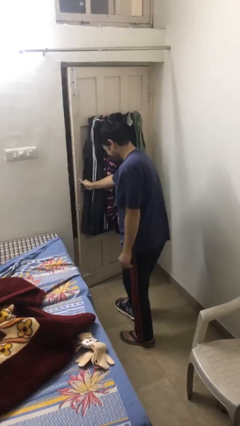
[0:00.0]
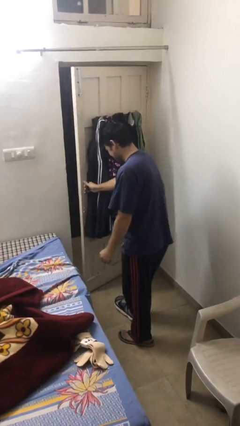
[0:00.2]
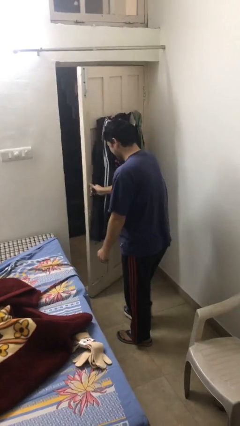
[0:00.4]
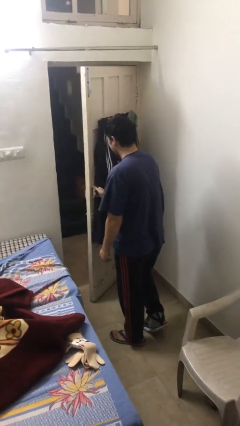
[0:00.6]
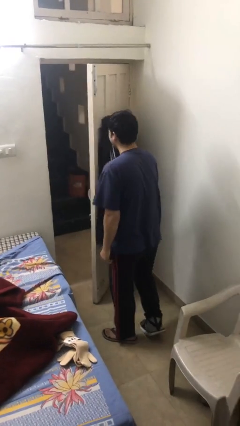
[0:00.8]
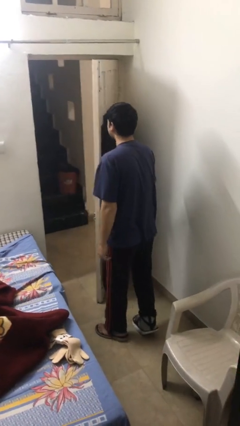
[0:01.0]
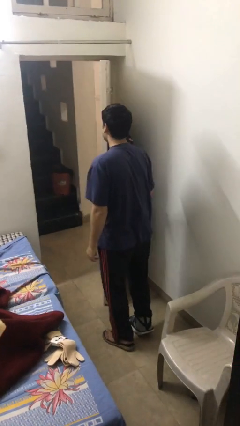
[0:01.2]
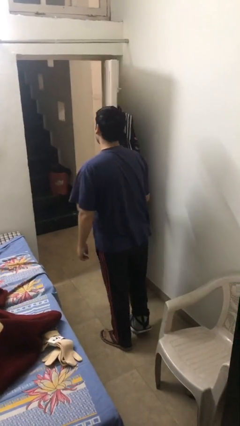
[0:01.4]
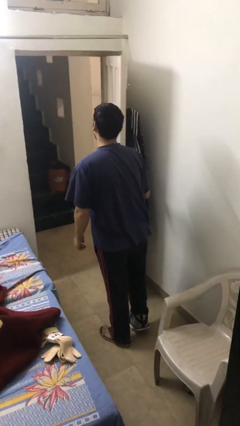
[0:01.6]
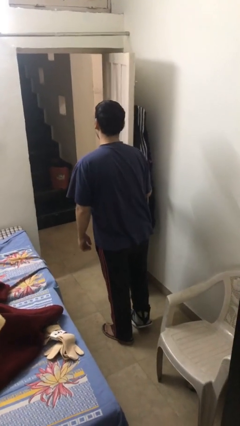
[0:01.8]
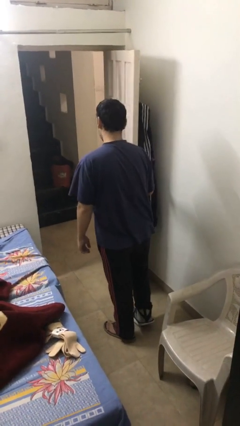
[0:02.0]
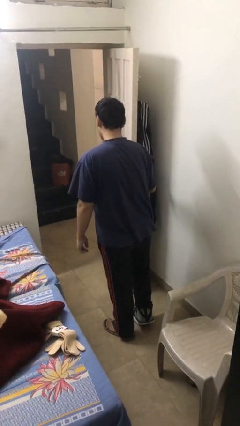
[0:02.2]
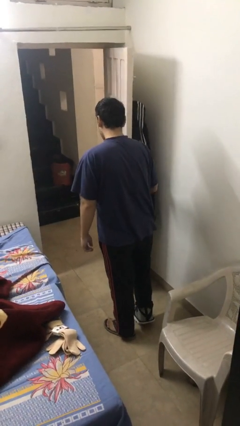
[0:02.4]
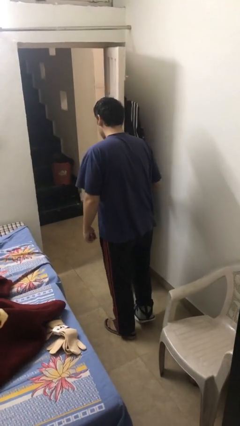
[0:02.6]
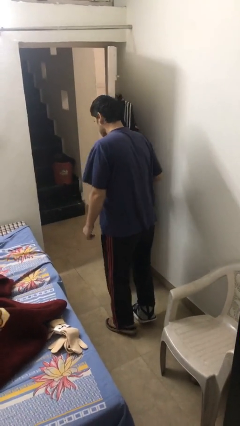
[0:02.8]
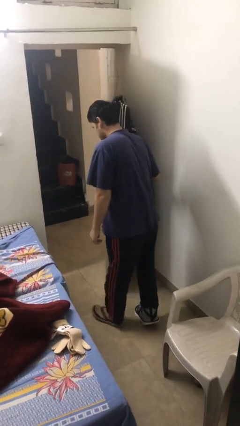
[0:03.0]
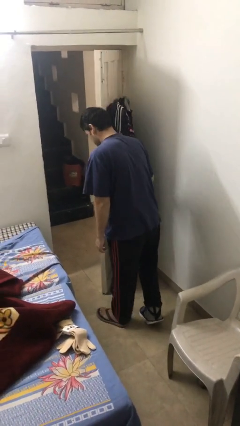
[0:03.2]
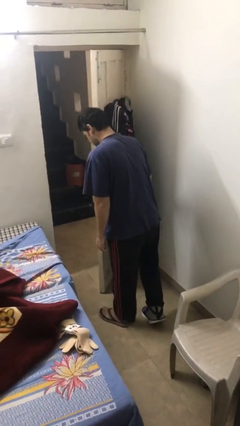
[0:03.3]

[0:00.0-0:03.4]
person opens facility door

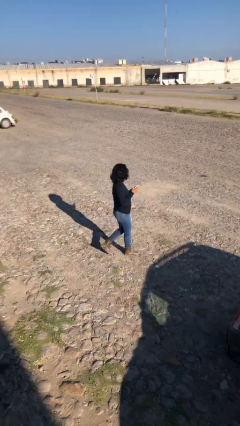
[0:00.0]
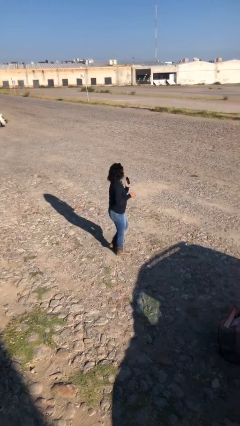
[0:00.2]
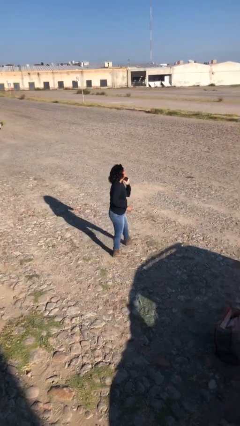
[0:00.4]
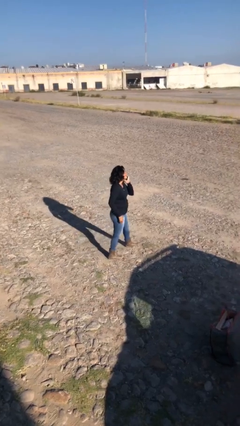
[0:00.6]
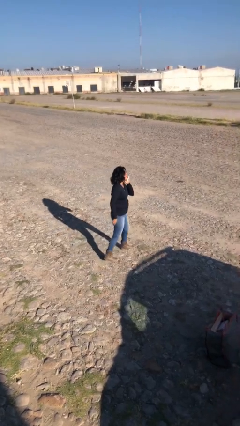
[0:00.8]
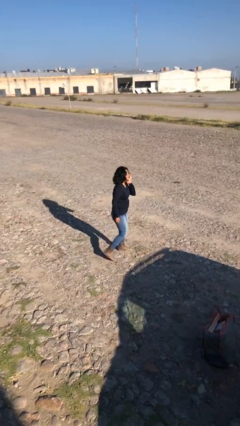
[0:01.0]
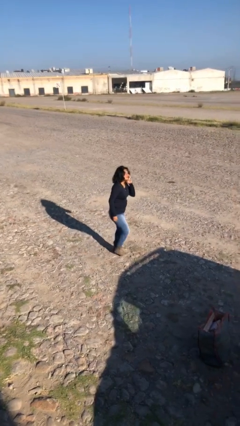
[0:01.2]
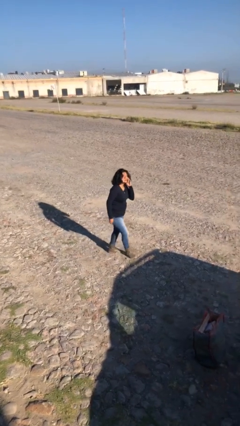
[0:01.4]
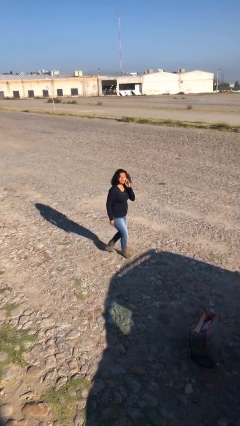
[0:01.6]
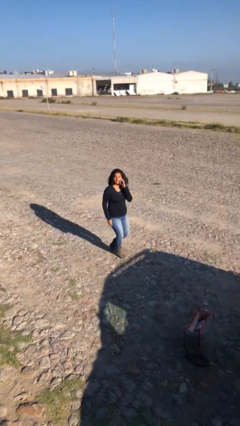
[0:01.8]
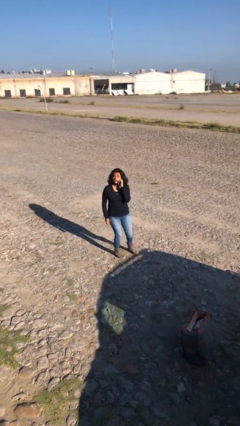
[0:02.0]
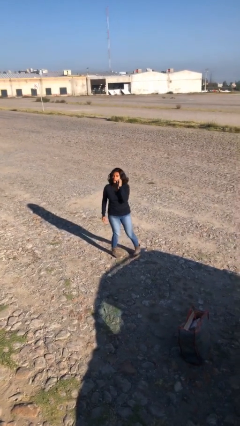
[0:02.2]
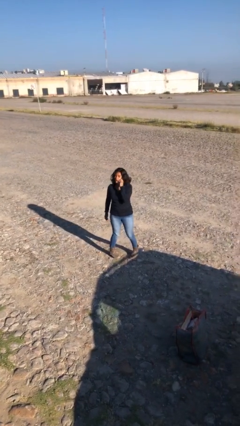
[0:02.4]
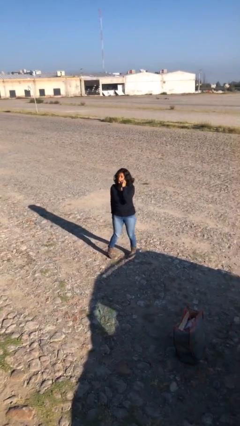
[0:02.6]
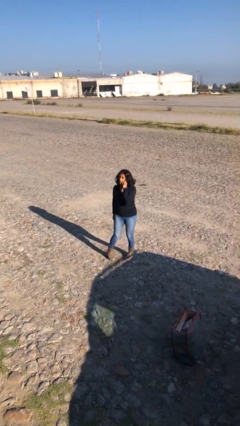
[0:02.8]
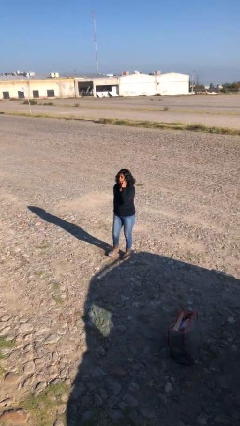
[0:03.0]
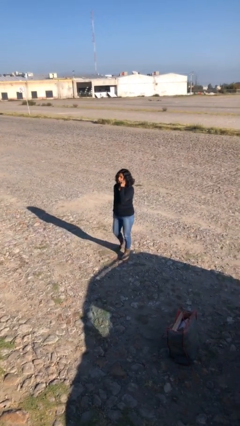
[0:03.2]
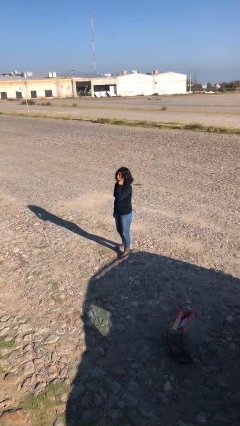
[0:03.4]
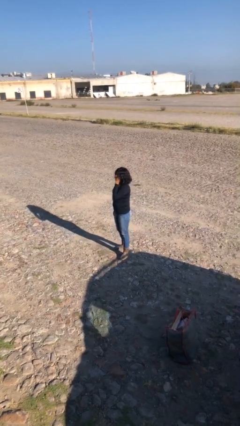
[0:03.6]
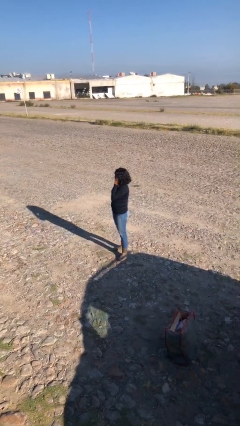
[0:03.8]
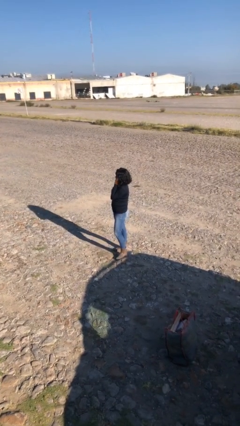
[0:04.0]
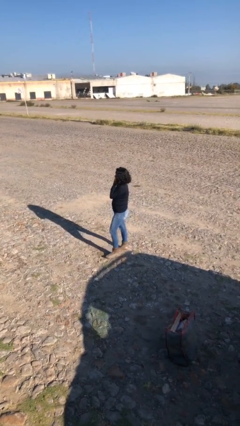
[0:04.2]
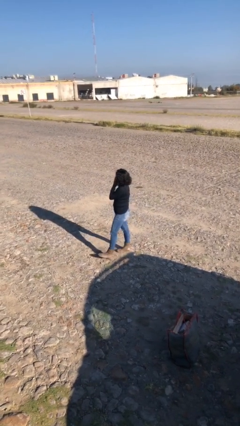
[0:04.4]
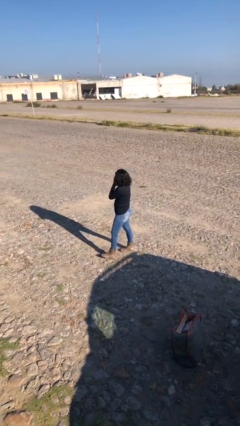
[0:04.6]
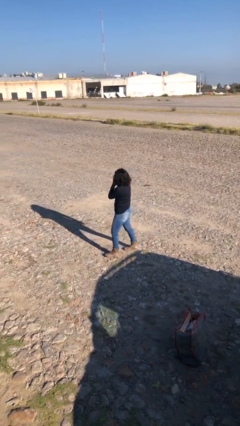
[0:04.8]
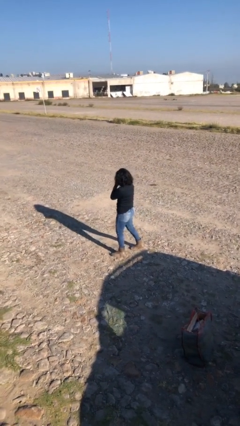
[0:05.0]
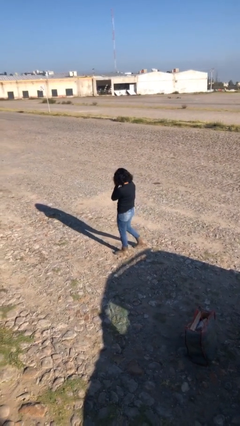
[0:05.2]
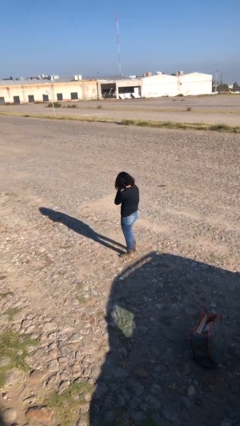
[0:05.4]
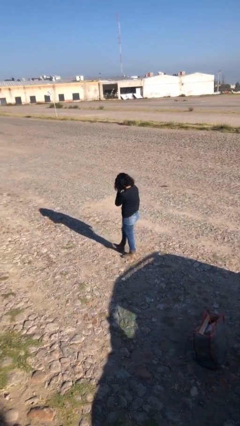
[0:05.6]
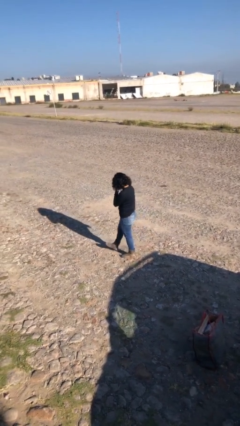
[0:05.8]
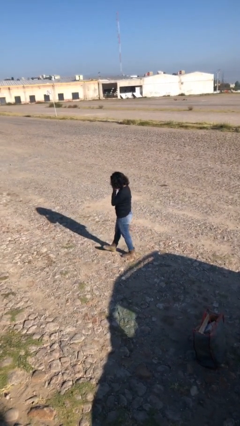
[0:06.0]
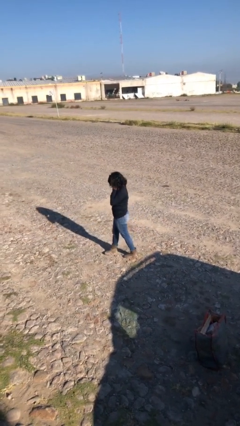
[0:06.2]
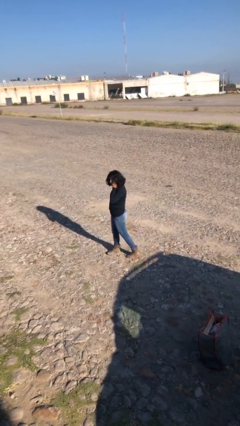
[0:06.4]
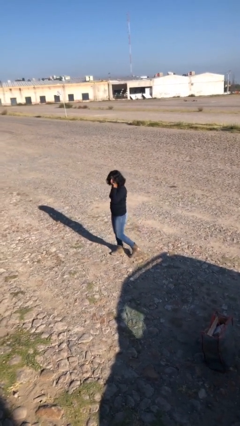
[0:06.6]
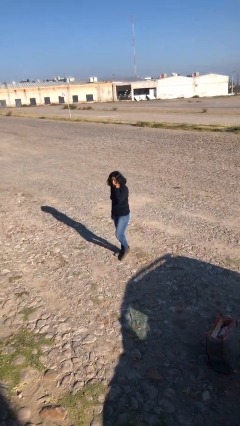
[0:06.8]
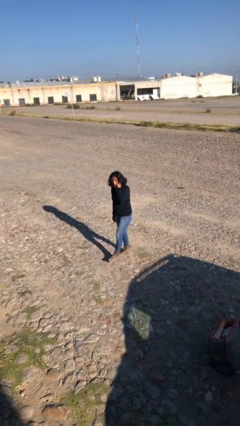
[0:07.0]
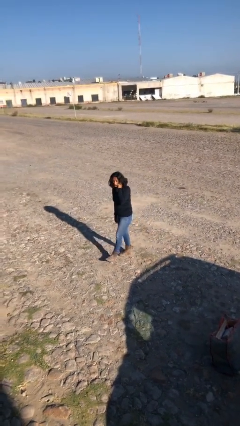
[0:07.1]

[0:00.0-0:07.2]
person talks on phone

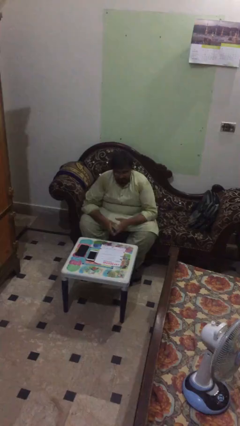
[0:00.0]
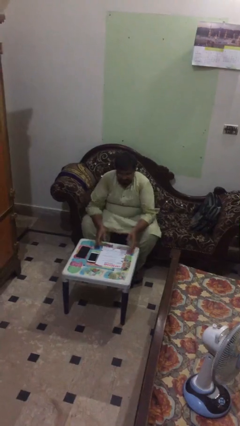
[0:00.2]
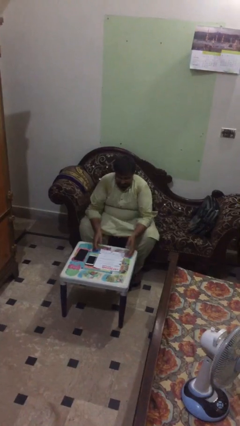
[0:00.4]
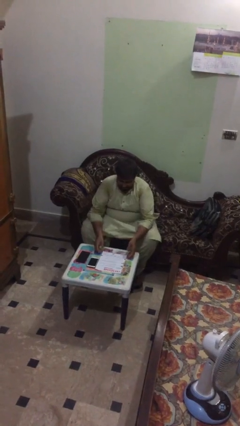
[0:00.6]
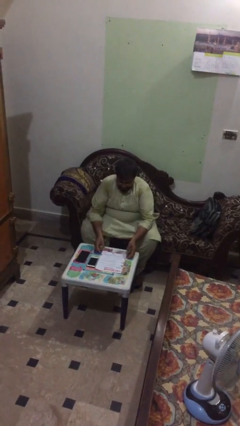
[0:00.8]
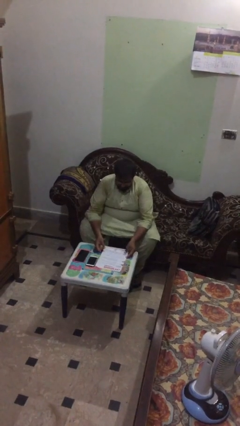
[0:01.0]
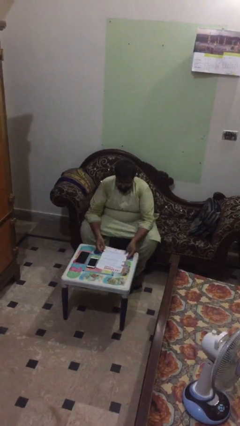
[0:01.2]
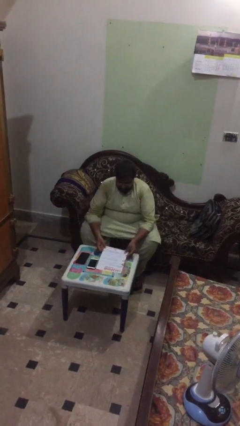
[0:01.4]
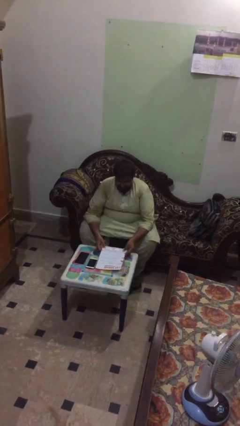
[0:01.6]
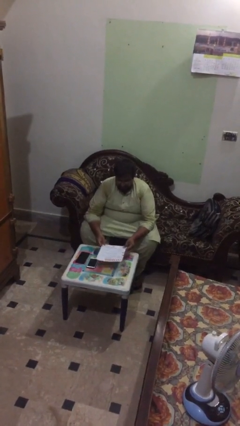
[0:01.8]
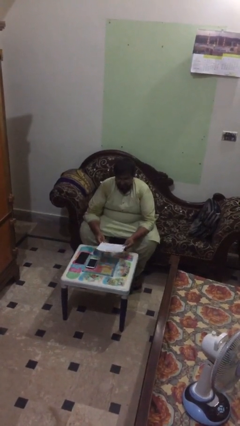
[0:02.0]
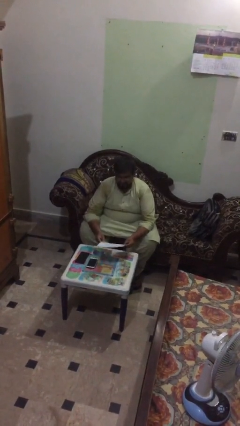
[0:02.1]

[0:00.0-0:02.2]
person picks up object from table

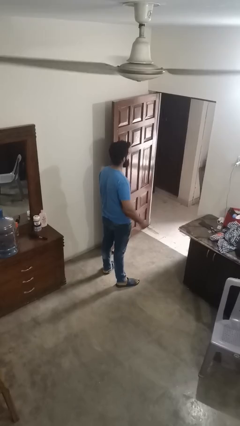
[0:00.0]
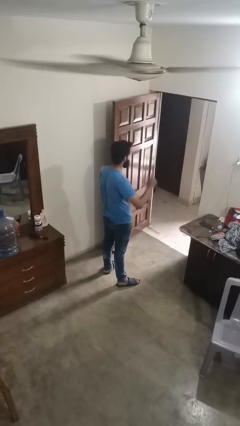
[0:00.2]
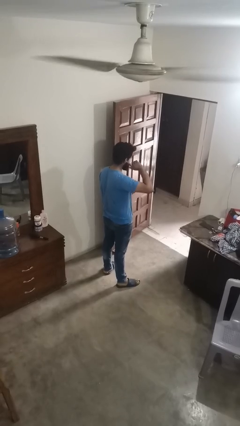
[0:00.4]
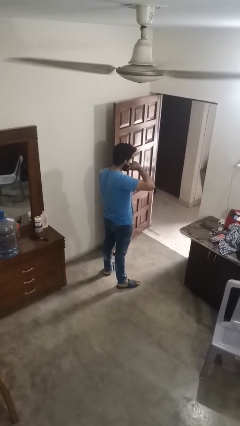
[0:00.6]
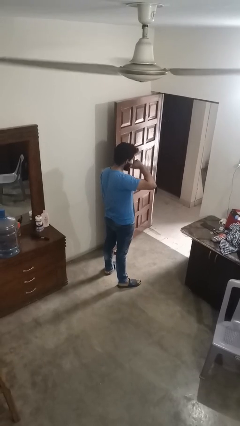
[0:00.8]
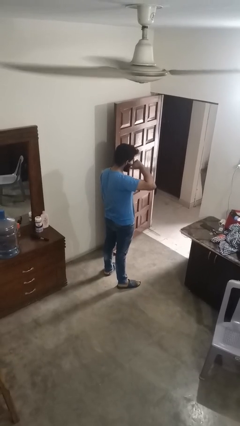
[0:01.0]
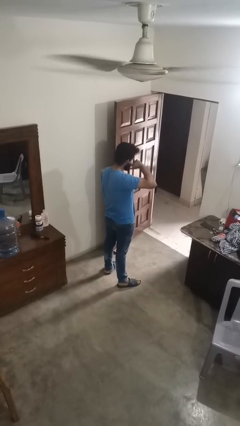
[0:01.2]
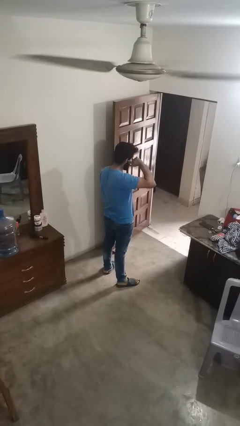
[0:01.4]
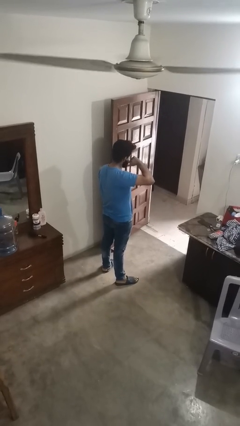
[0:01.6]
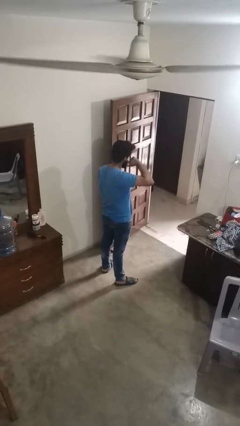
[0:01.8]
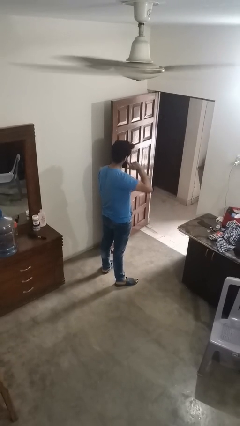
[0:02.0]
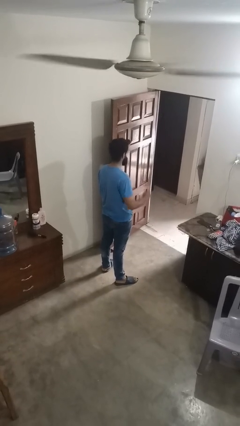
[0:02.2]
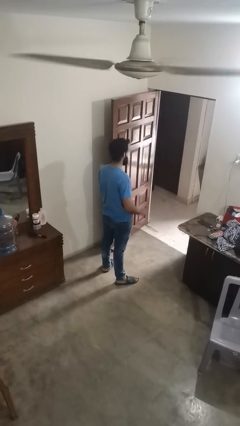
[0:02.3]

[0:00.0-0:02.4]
person touches earlobe

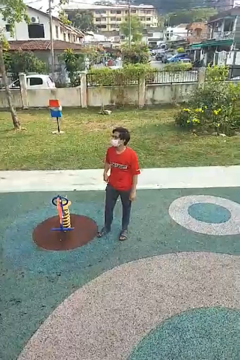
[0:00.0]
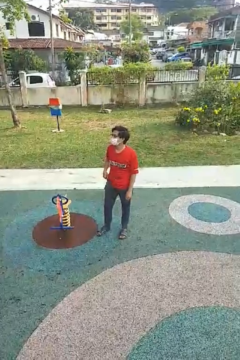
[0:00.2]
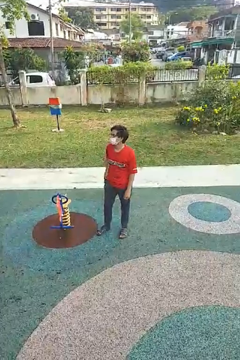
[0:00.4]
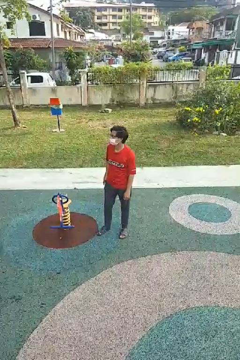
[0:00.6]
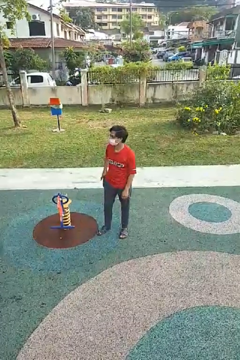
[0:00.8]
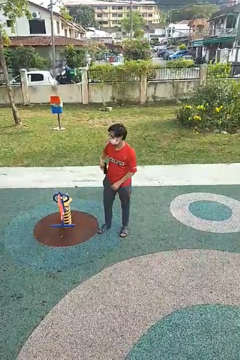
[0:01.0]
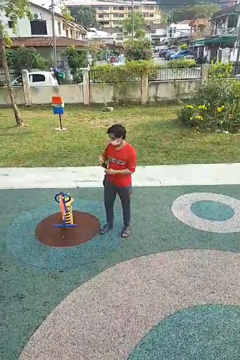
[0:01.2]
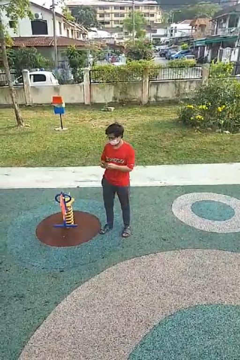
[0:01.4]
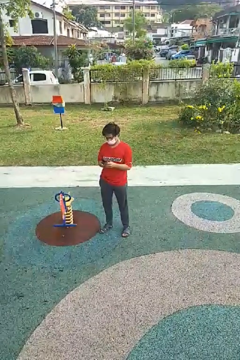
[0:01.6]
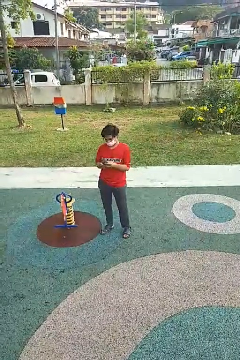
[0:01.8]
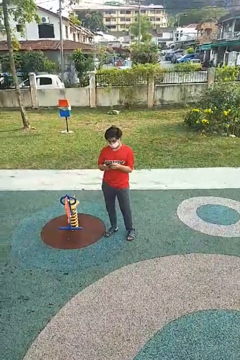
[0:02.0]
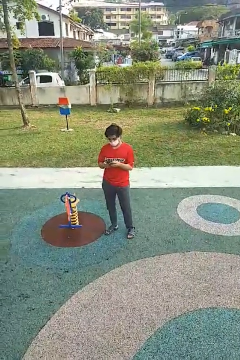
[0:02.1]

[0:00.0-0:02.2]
person takes phone from pocket

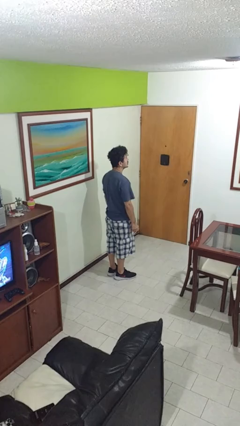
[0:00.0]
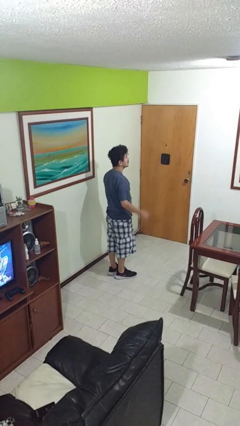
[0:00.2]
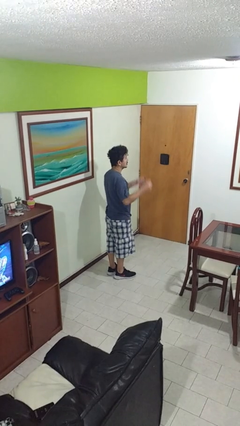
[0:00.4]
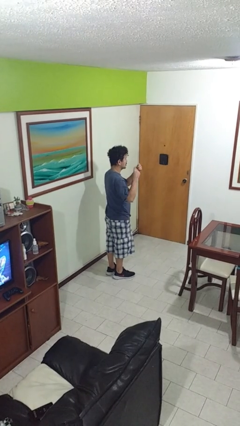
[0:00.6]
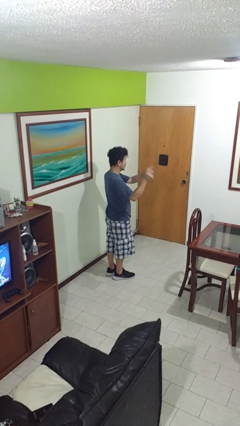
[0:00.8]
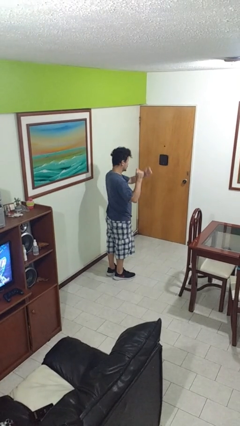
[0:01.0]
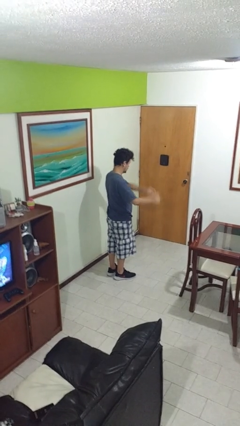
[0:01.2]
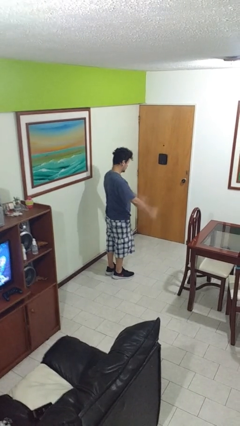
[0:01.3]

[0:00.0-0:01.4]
person snaps fingers
